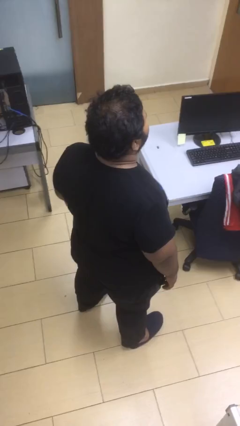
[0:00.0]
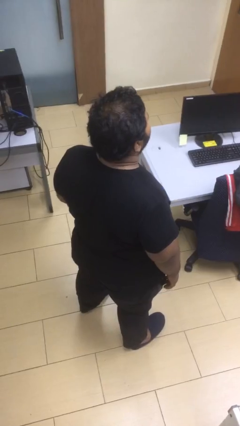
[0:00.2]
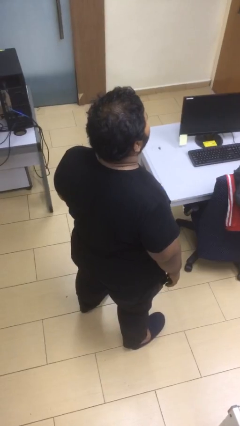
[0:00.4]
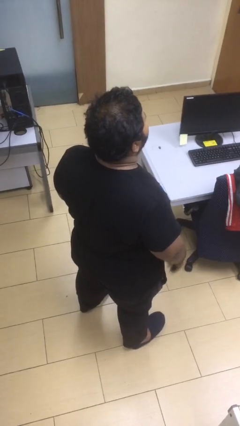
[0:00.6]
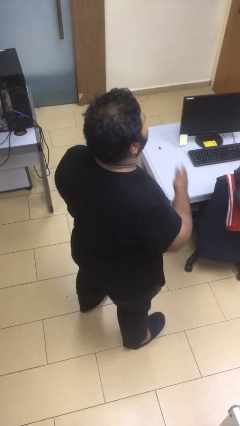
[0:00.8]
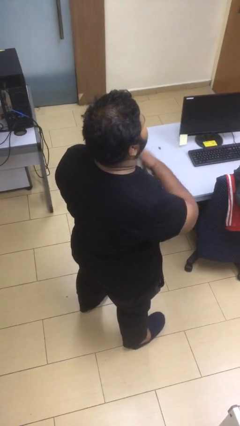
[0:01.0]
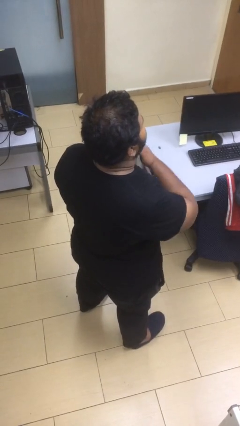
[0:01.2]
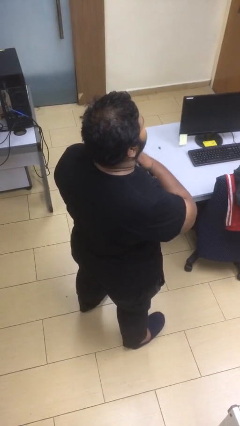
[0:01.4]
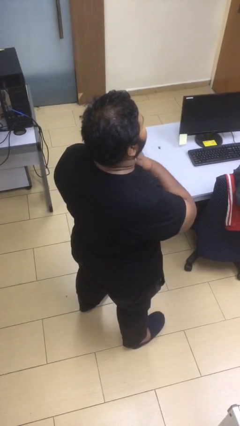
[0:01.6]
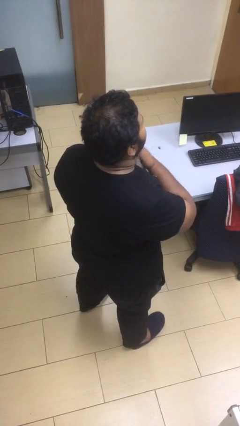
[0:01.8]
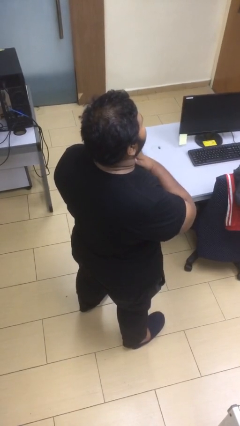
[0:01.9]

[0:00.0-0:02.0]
person drums on chest

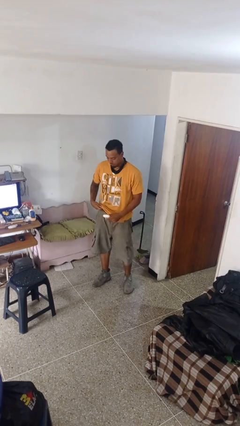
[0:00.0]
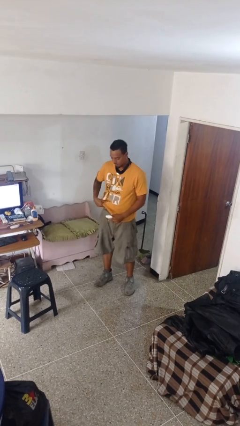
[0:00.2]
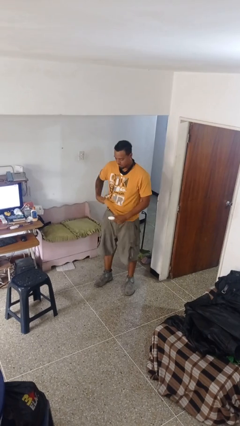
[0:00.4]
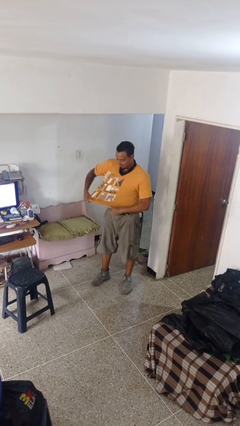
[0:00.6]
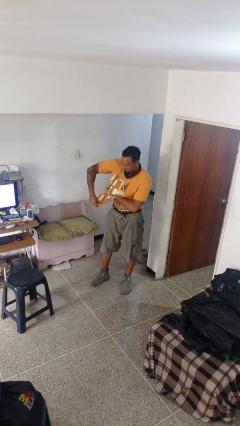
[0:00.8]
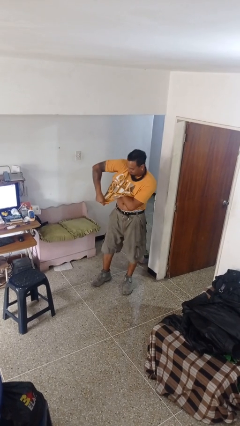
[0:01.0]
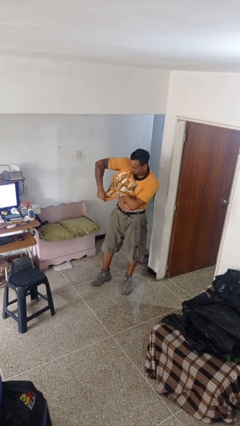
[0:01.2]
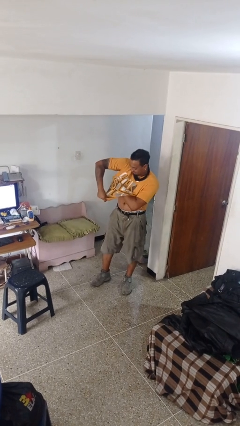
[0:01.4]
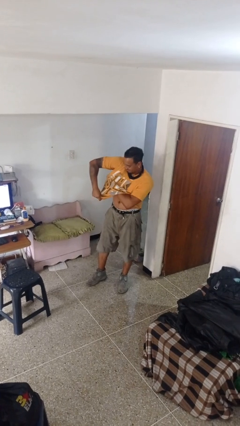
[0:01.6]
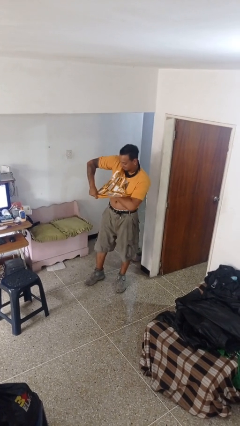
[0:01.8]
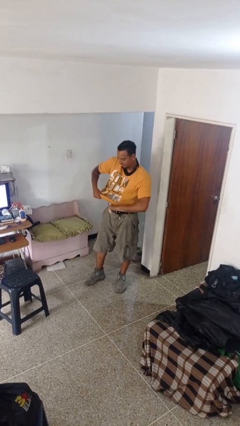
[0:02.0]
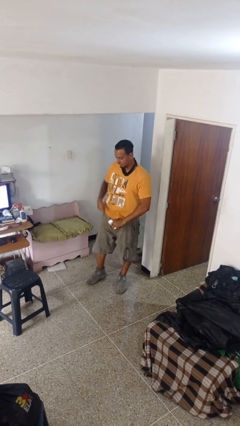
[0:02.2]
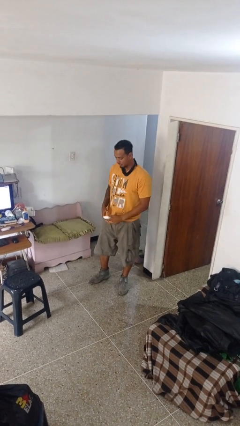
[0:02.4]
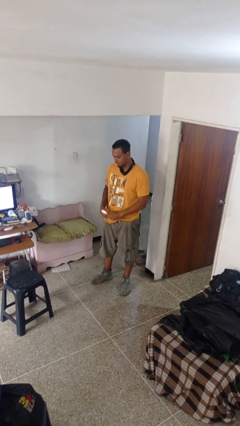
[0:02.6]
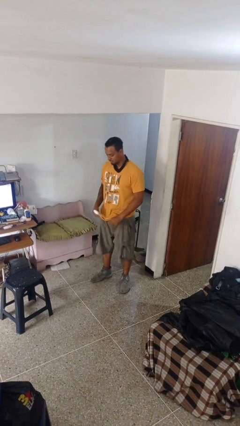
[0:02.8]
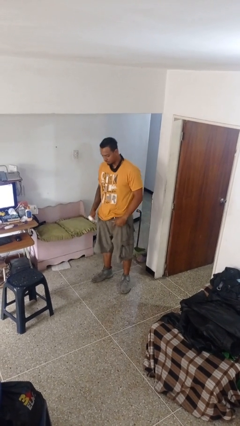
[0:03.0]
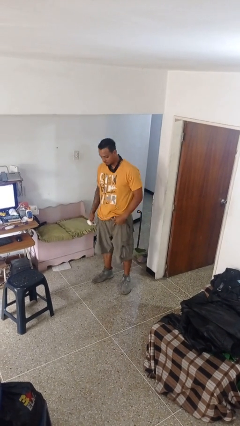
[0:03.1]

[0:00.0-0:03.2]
person applies deodorant

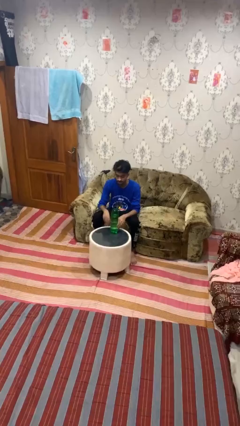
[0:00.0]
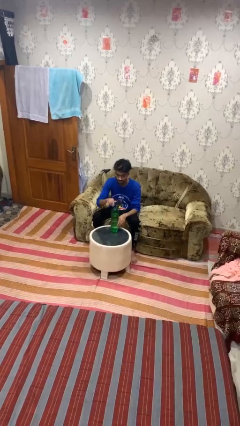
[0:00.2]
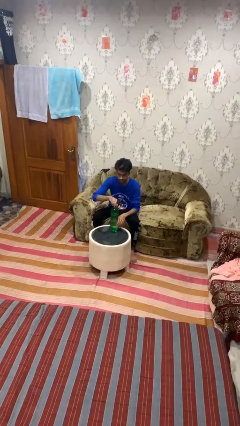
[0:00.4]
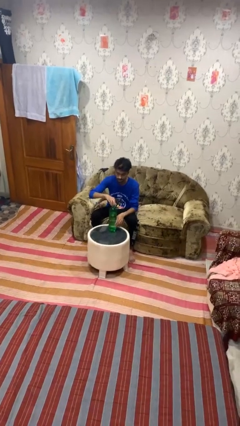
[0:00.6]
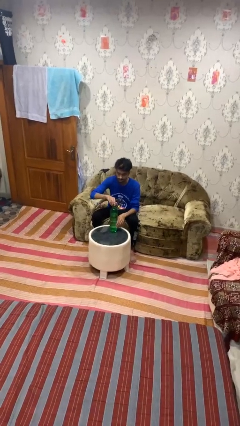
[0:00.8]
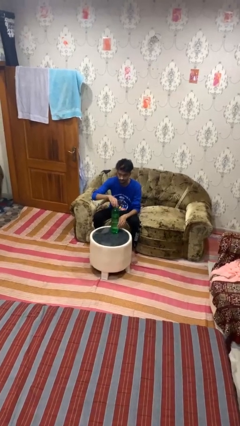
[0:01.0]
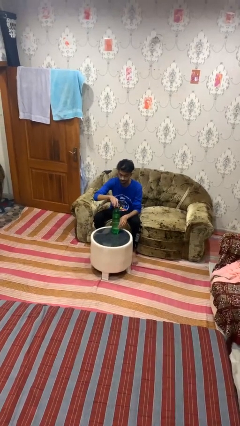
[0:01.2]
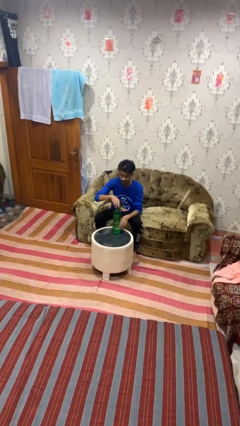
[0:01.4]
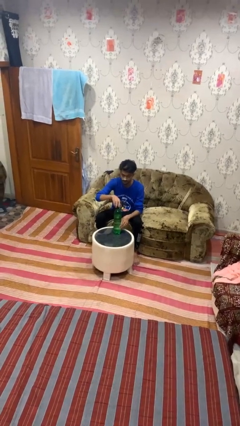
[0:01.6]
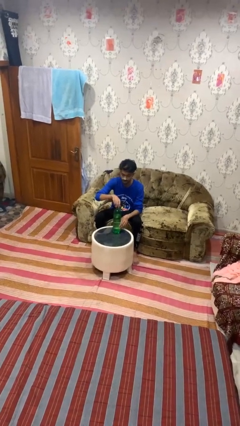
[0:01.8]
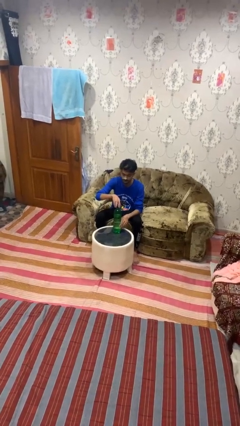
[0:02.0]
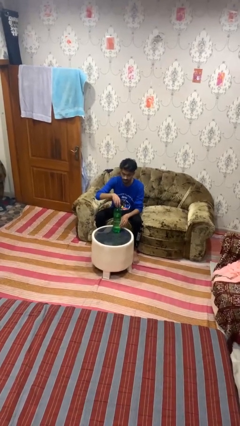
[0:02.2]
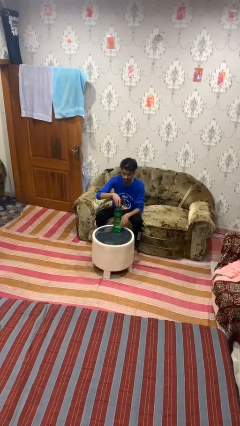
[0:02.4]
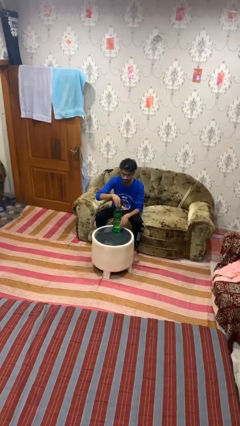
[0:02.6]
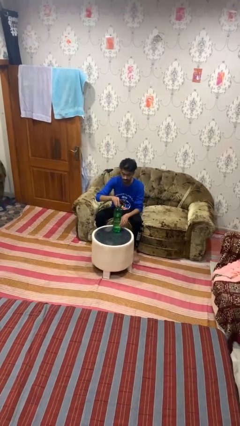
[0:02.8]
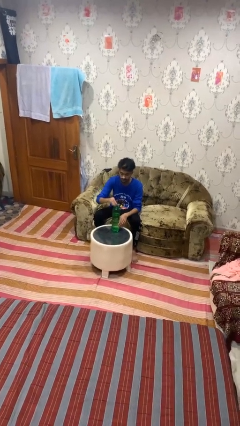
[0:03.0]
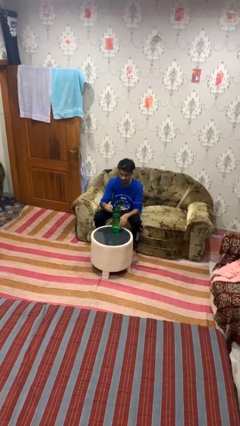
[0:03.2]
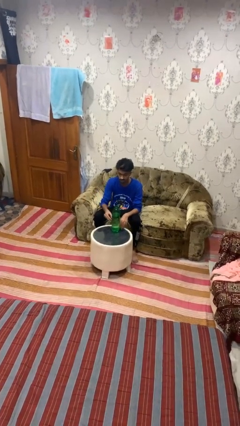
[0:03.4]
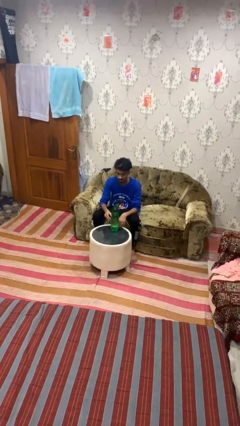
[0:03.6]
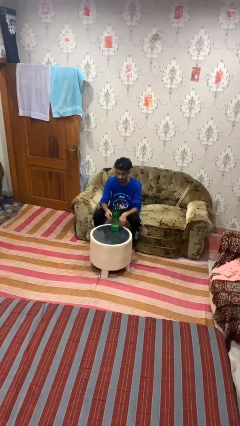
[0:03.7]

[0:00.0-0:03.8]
person unscrews lid from bottle

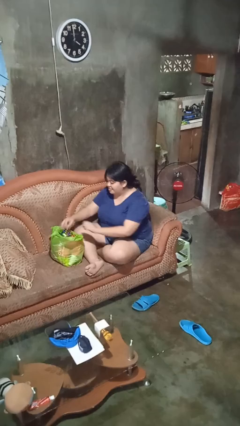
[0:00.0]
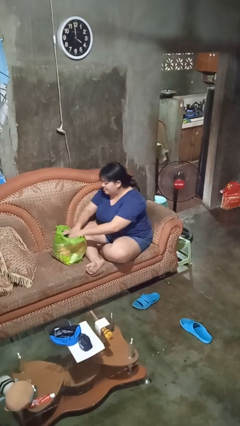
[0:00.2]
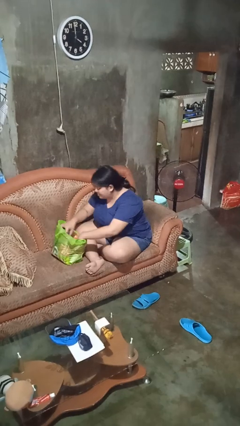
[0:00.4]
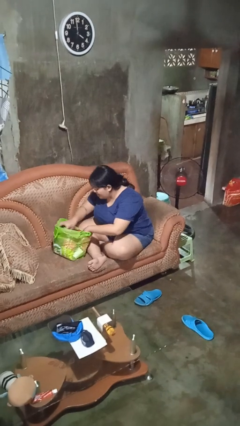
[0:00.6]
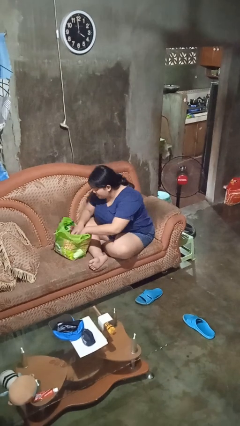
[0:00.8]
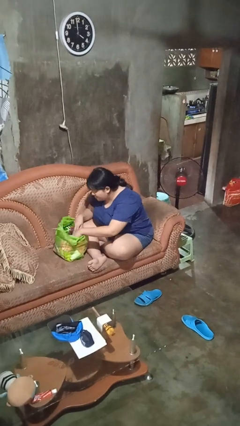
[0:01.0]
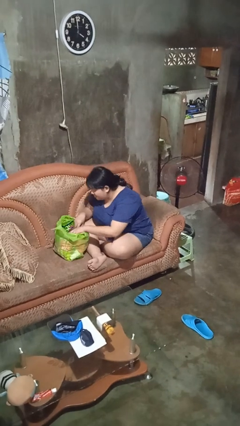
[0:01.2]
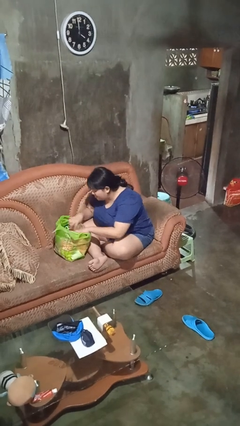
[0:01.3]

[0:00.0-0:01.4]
person searches in bag

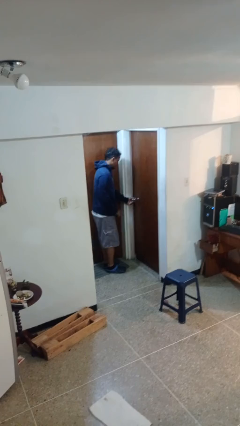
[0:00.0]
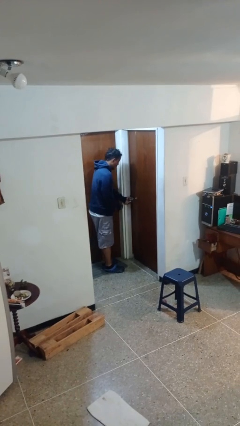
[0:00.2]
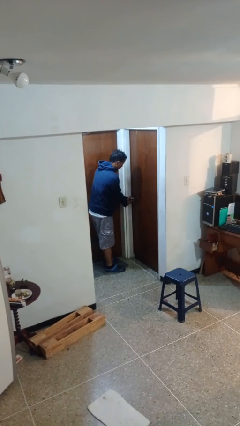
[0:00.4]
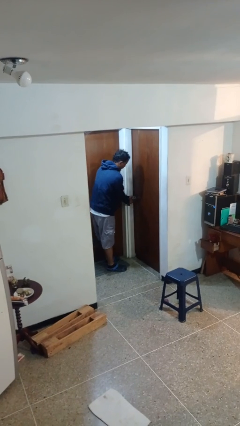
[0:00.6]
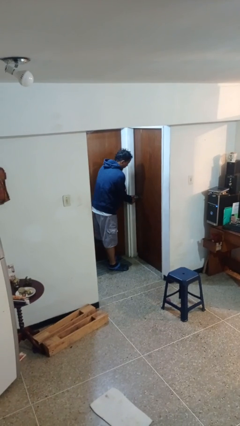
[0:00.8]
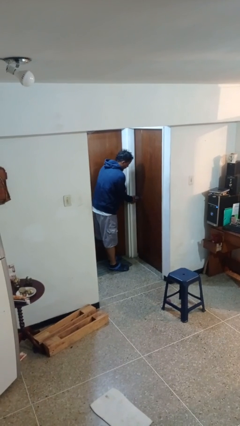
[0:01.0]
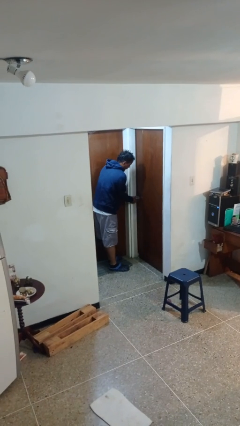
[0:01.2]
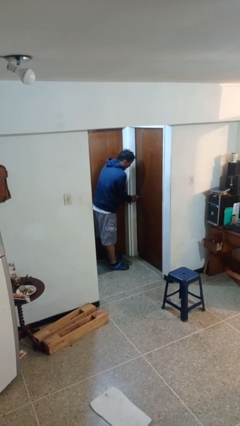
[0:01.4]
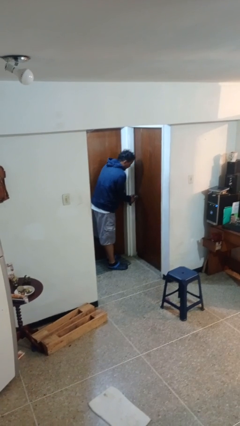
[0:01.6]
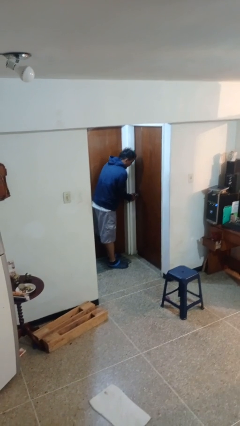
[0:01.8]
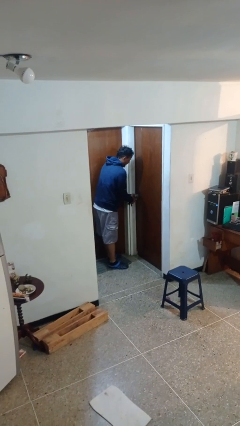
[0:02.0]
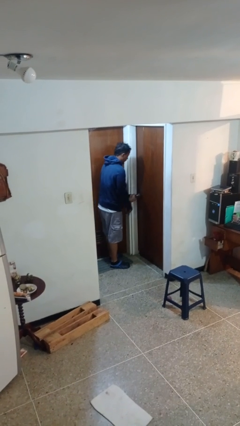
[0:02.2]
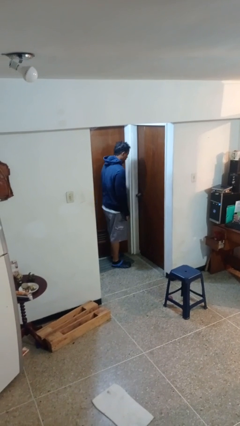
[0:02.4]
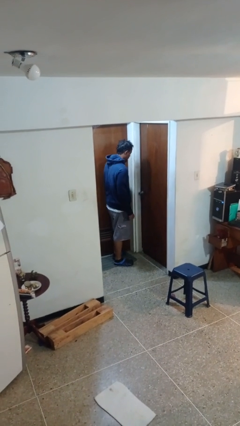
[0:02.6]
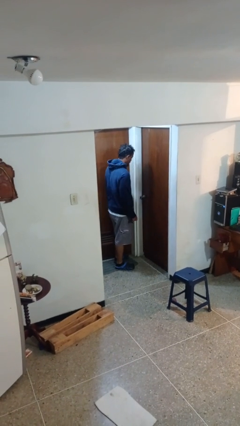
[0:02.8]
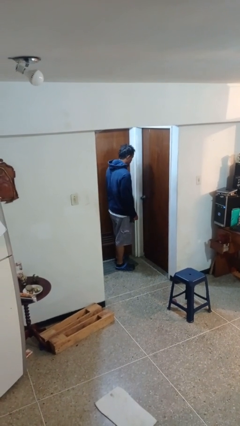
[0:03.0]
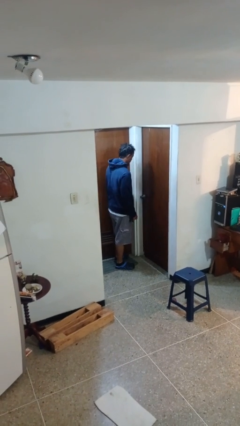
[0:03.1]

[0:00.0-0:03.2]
person locks door with keys

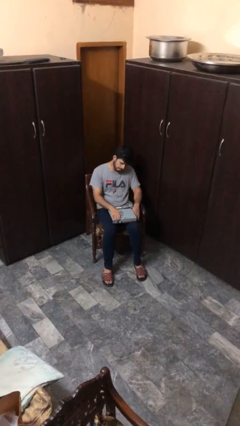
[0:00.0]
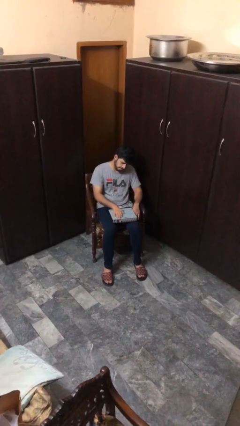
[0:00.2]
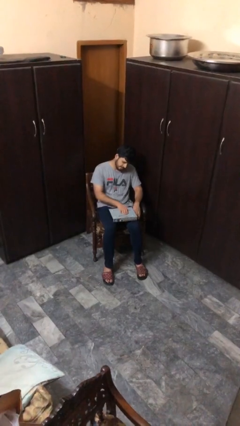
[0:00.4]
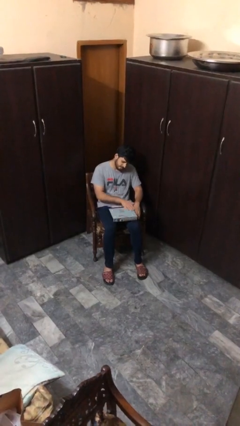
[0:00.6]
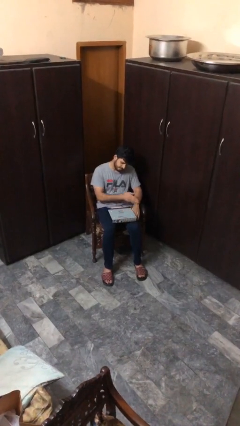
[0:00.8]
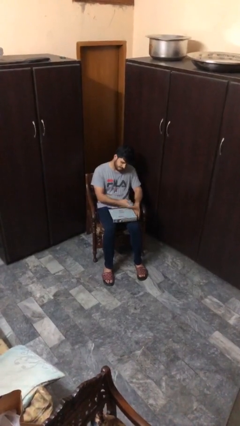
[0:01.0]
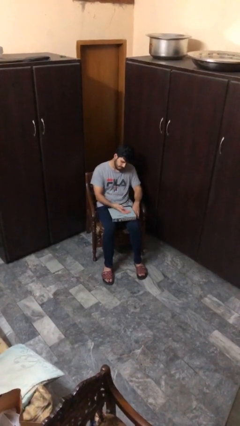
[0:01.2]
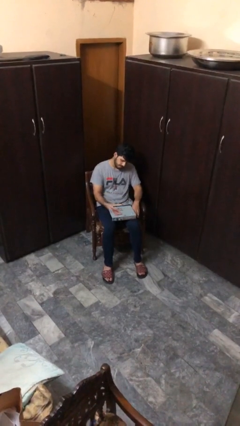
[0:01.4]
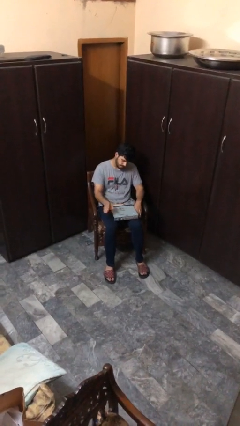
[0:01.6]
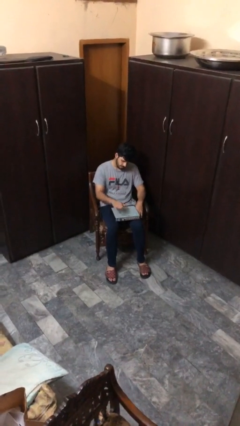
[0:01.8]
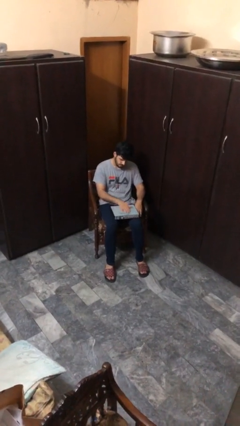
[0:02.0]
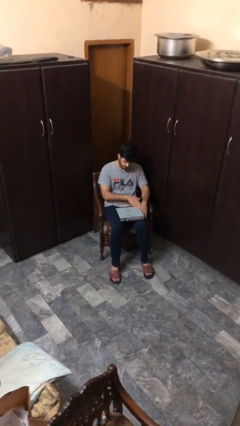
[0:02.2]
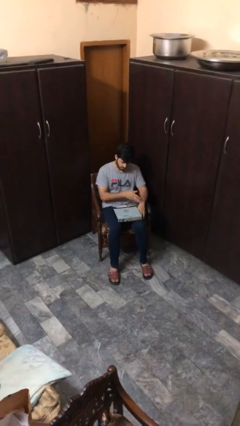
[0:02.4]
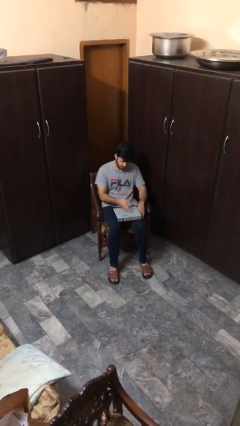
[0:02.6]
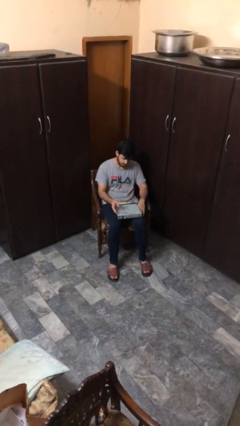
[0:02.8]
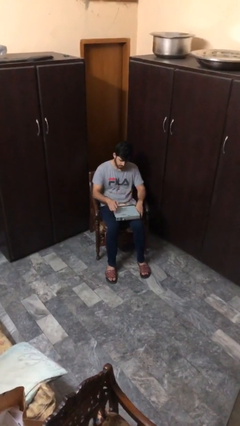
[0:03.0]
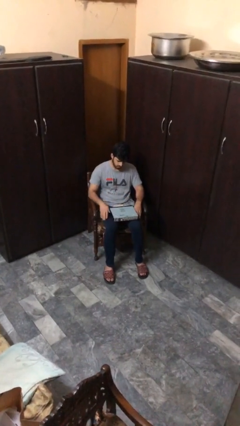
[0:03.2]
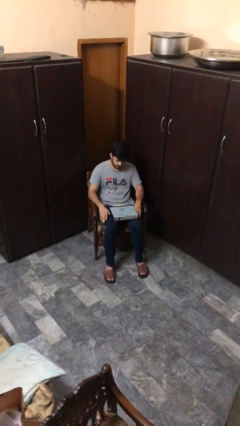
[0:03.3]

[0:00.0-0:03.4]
person waves hand over object

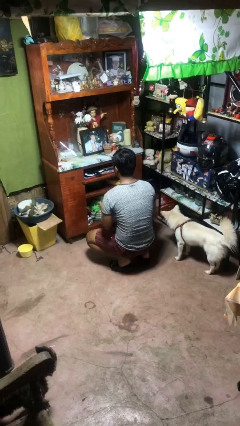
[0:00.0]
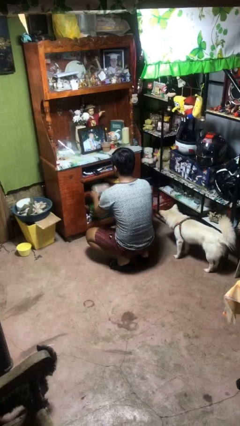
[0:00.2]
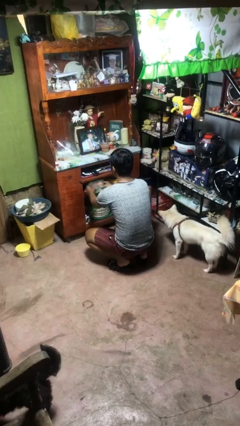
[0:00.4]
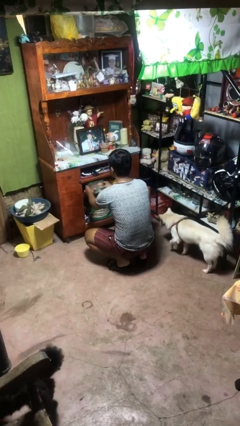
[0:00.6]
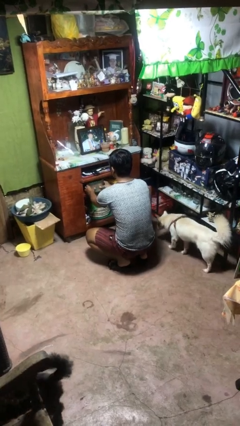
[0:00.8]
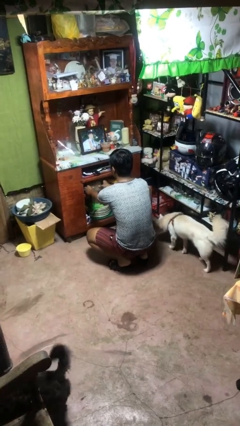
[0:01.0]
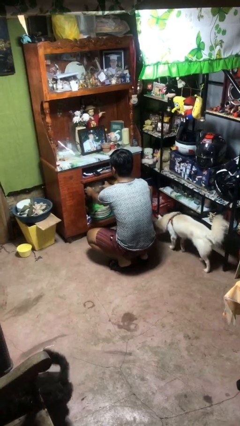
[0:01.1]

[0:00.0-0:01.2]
person puts down object into cabinet
